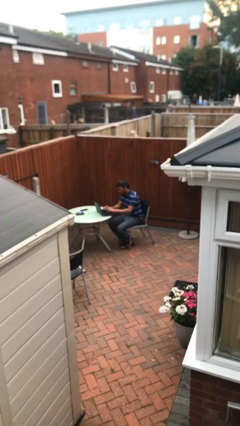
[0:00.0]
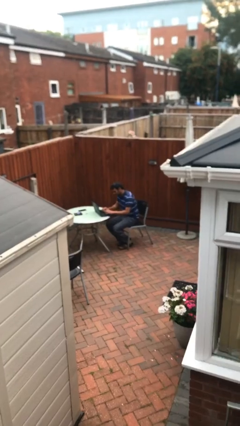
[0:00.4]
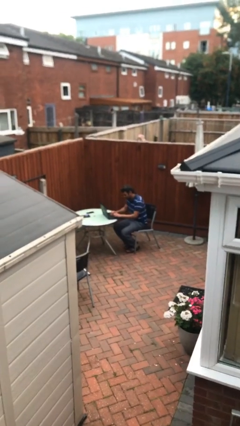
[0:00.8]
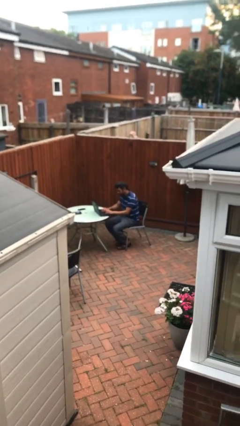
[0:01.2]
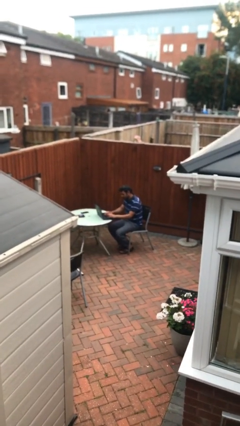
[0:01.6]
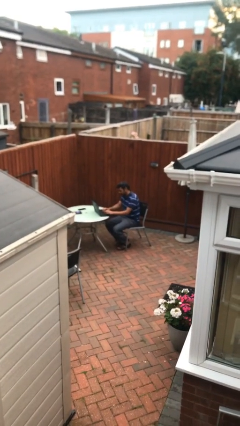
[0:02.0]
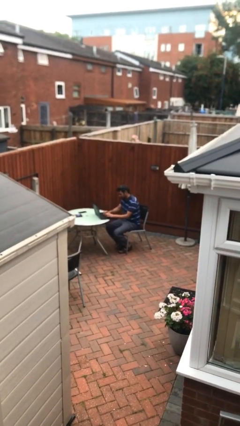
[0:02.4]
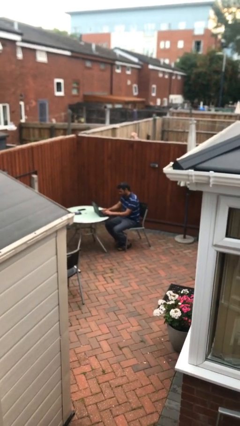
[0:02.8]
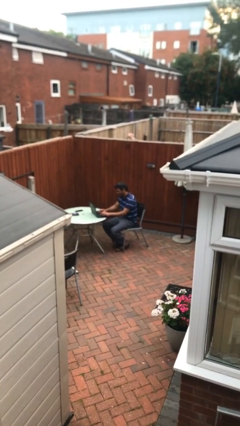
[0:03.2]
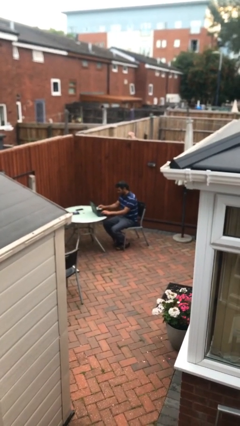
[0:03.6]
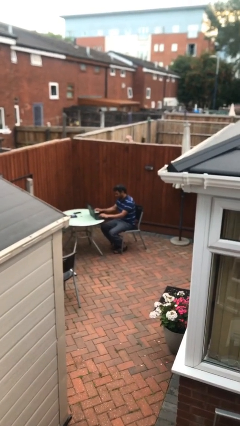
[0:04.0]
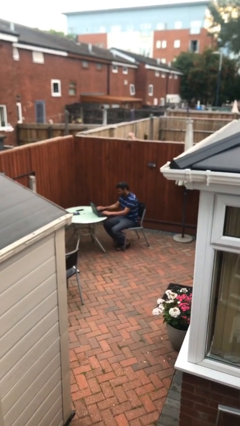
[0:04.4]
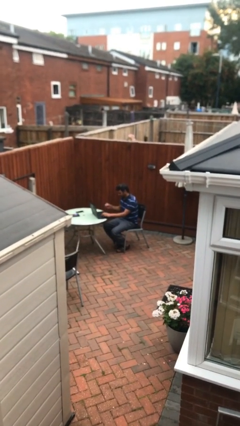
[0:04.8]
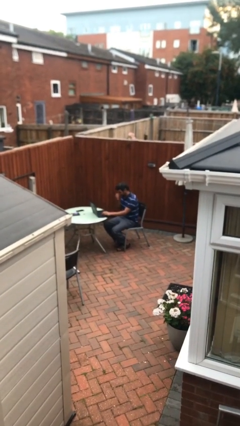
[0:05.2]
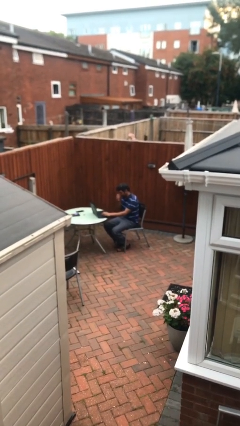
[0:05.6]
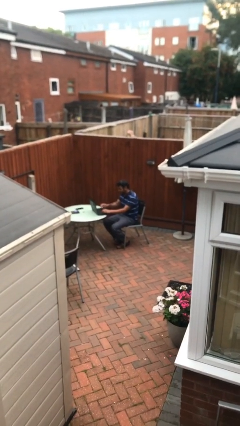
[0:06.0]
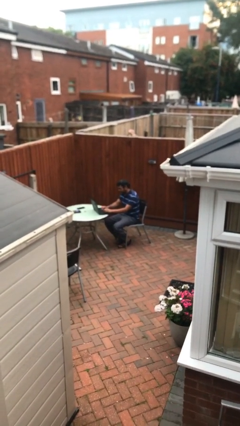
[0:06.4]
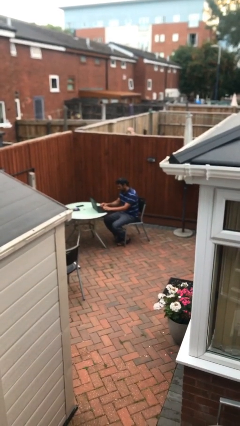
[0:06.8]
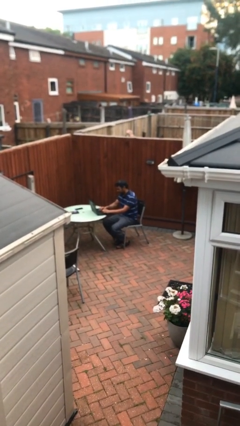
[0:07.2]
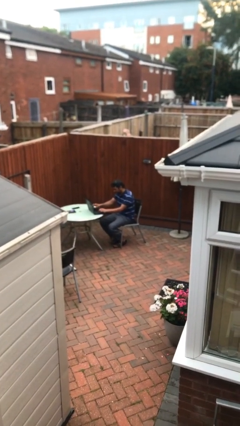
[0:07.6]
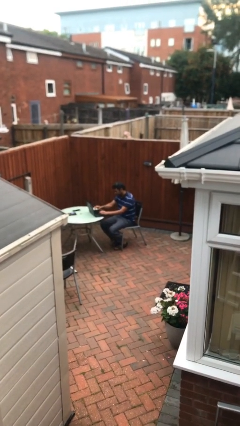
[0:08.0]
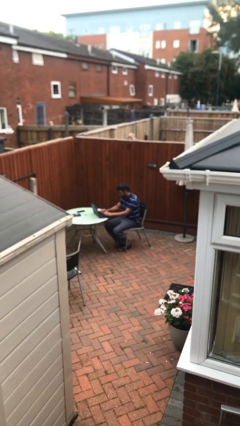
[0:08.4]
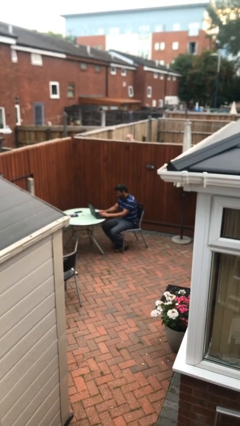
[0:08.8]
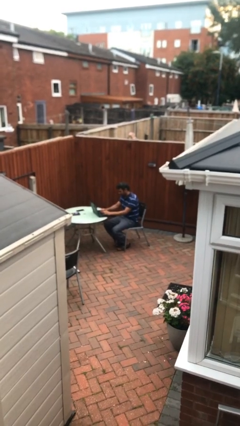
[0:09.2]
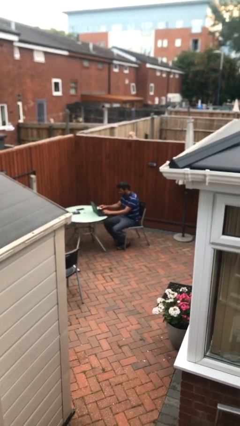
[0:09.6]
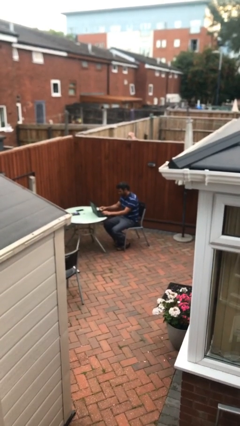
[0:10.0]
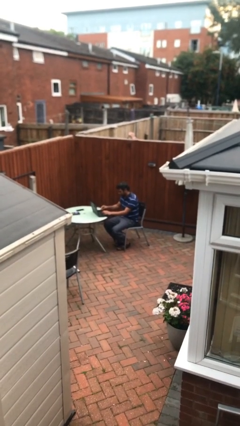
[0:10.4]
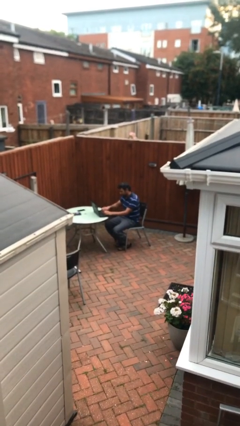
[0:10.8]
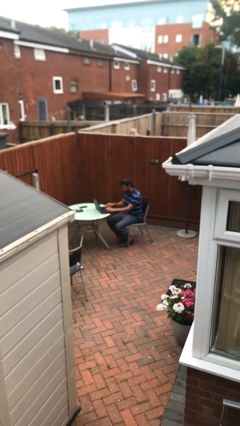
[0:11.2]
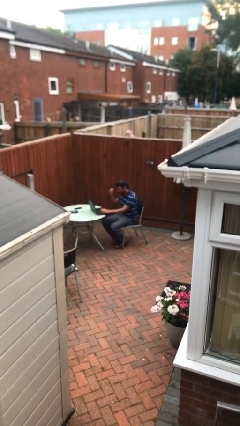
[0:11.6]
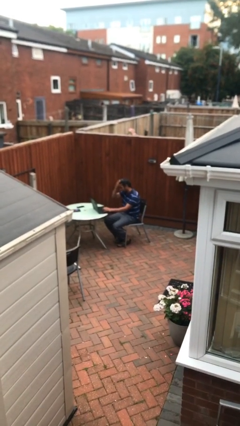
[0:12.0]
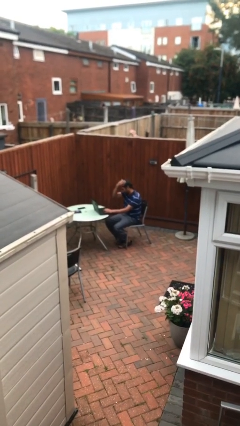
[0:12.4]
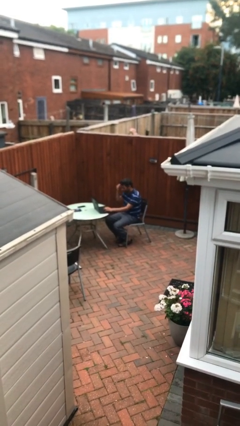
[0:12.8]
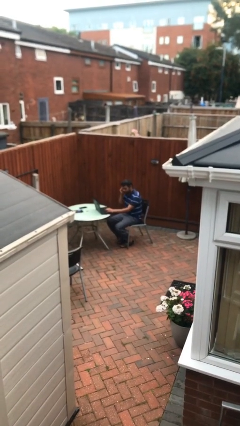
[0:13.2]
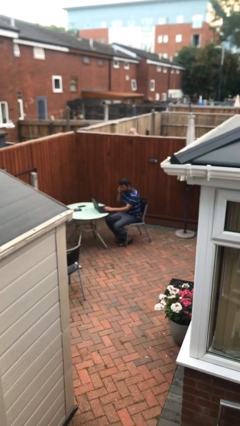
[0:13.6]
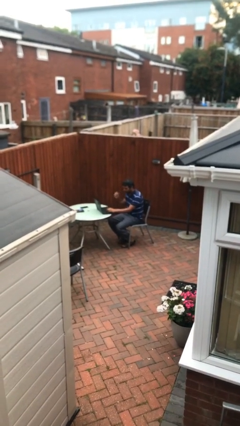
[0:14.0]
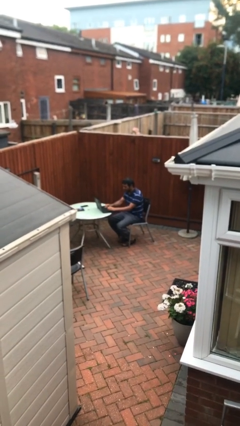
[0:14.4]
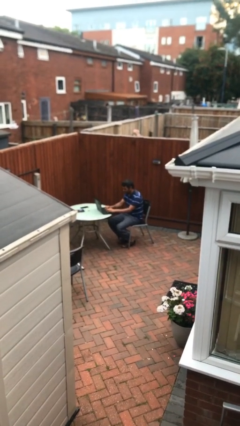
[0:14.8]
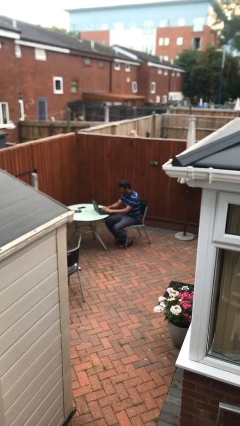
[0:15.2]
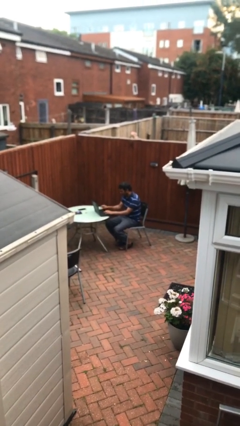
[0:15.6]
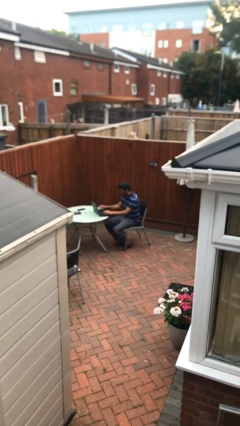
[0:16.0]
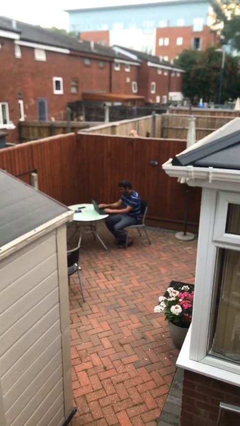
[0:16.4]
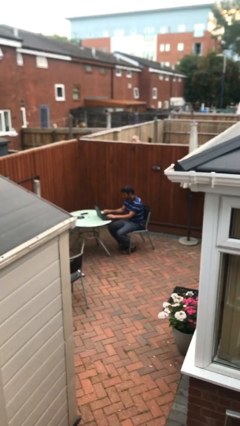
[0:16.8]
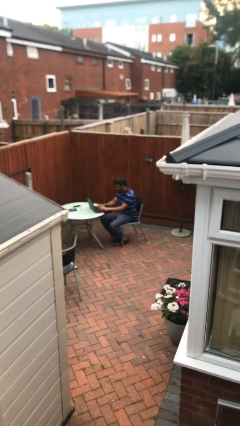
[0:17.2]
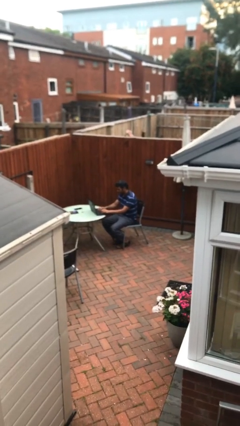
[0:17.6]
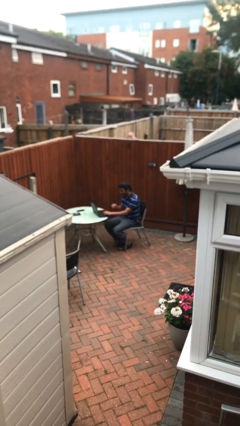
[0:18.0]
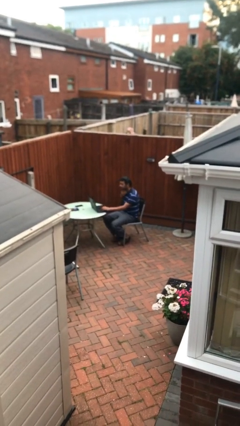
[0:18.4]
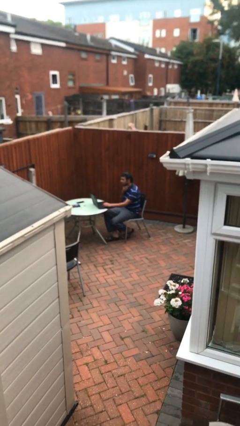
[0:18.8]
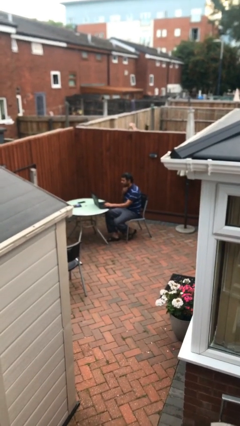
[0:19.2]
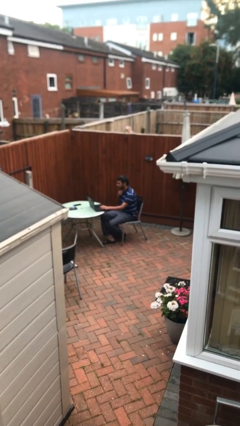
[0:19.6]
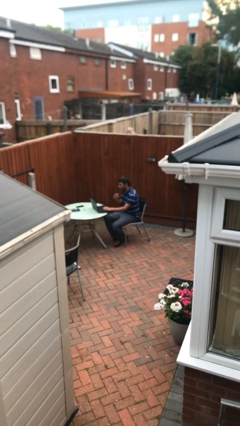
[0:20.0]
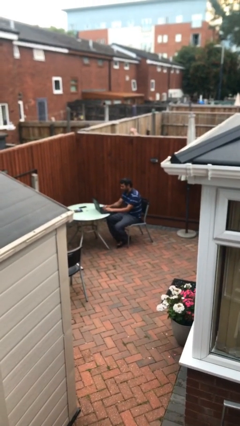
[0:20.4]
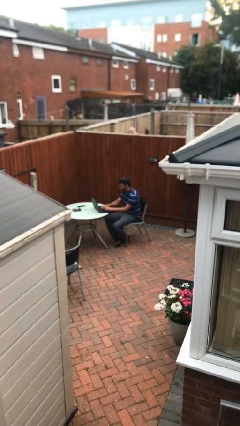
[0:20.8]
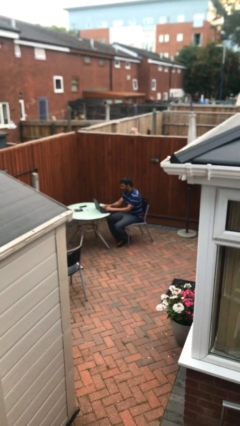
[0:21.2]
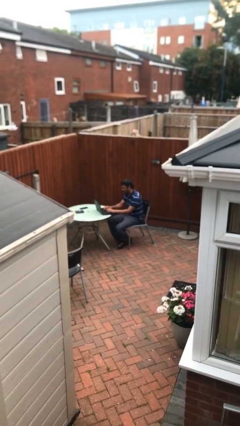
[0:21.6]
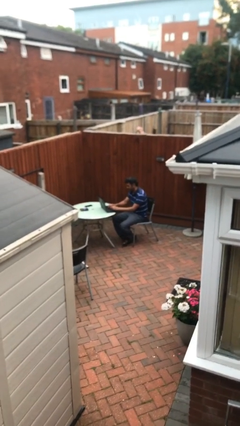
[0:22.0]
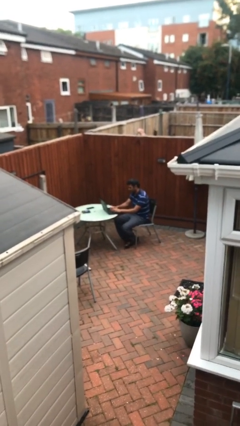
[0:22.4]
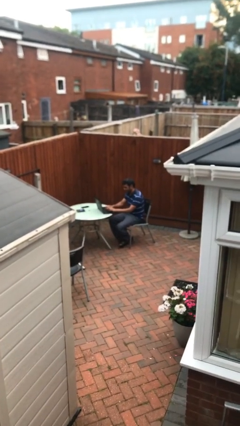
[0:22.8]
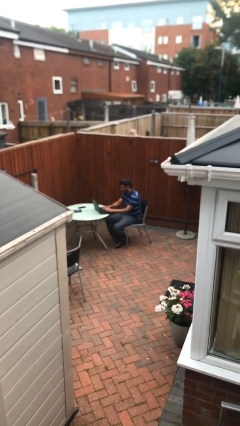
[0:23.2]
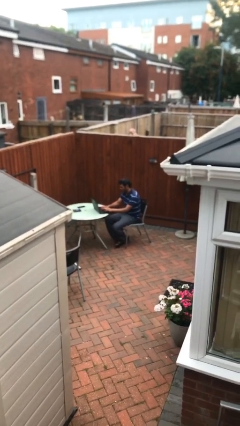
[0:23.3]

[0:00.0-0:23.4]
person interacts with laptop

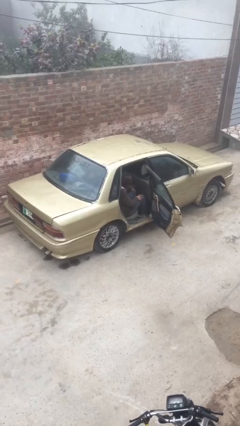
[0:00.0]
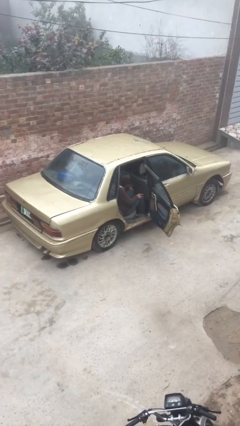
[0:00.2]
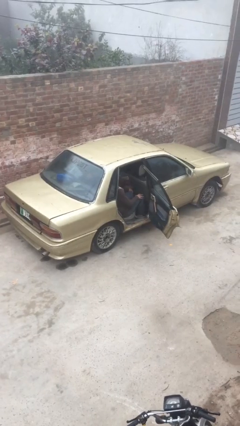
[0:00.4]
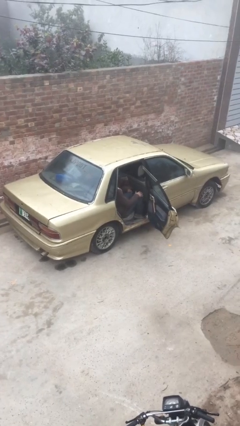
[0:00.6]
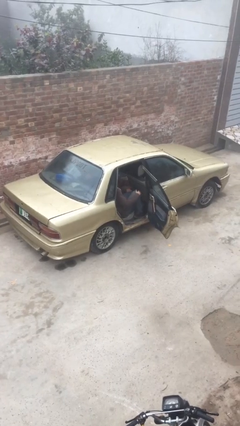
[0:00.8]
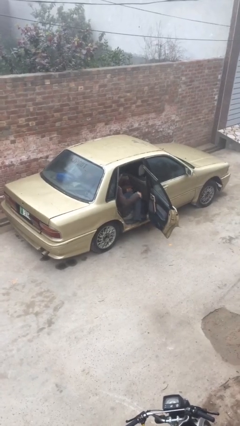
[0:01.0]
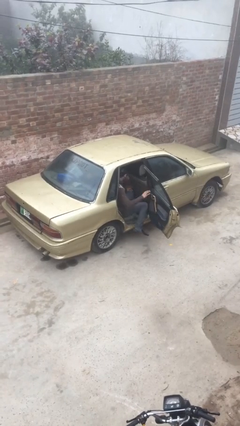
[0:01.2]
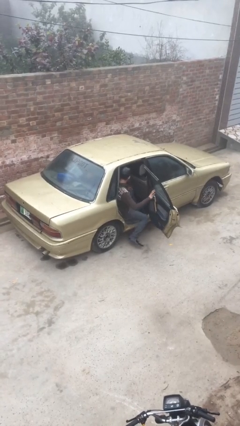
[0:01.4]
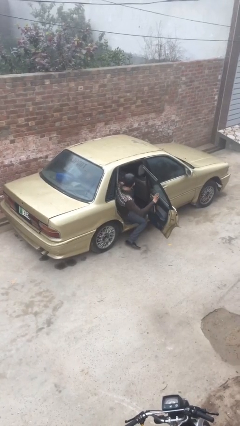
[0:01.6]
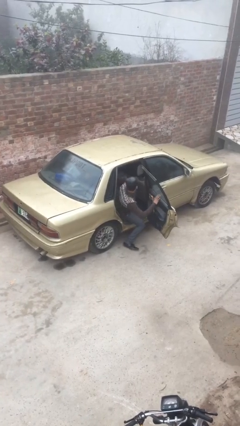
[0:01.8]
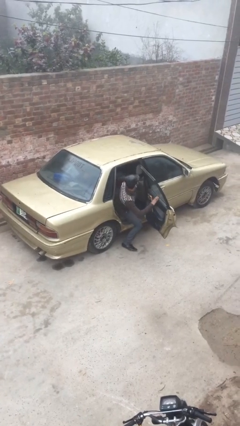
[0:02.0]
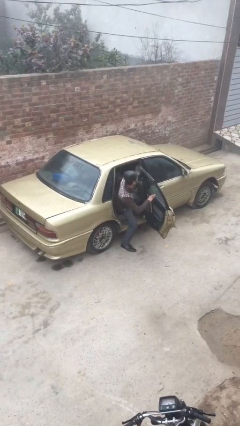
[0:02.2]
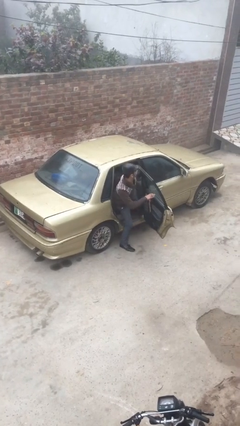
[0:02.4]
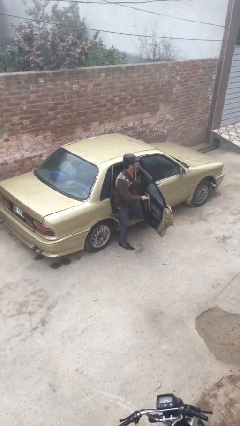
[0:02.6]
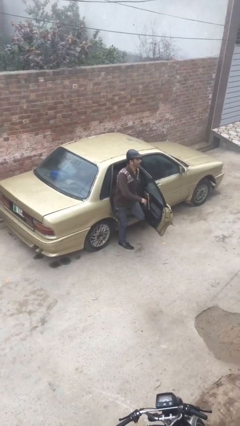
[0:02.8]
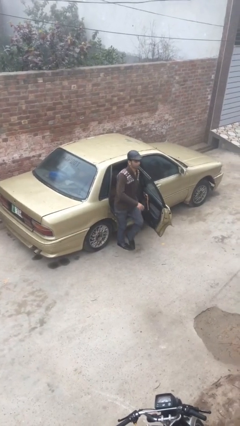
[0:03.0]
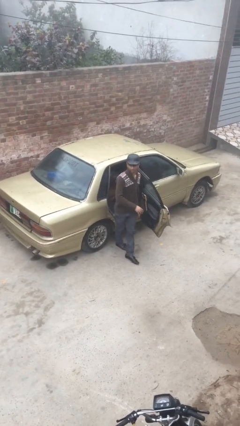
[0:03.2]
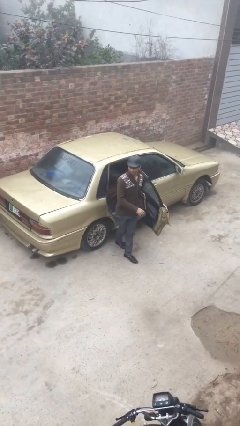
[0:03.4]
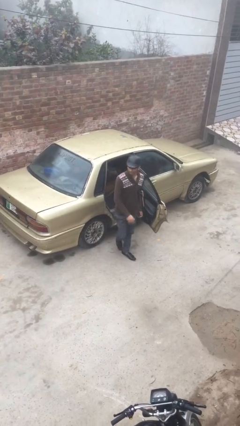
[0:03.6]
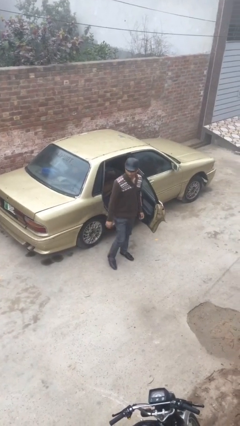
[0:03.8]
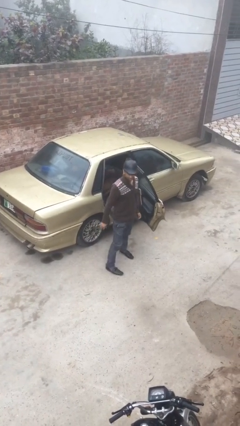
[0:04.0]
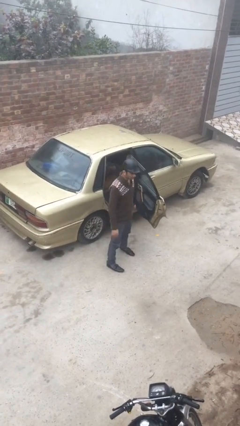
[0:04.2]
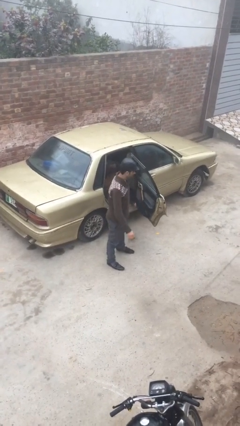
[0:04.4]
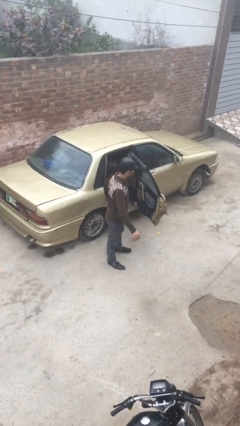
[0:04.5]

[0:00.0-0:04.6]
person exits car

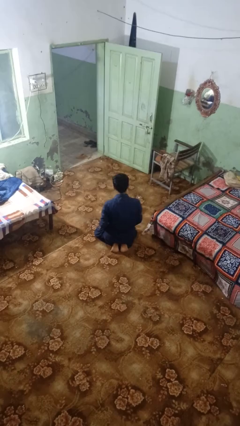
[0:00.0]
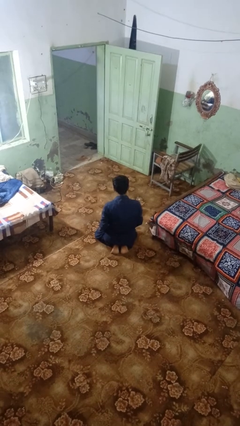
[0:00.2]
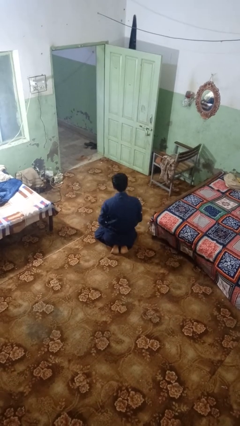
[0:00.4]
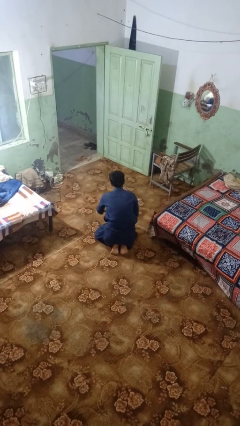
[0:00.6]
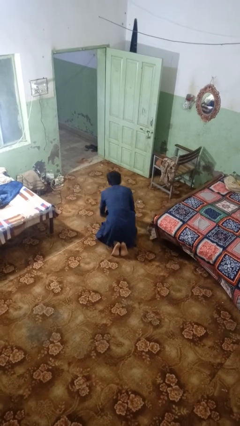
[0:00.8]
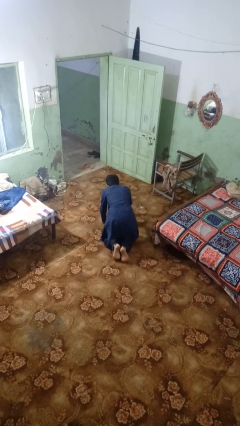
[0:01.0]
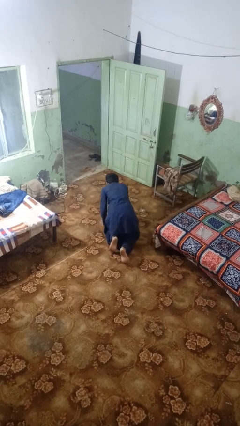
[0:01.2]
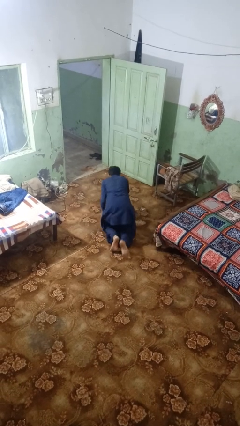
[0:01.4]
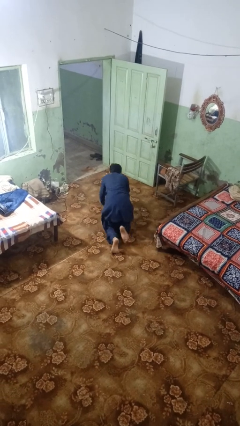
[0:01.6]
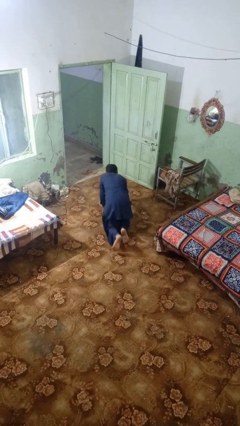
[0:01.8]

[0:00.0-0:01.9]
person crawls
